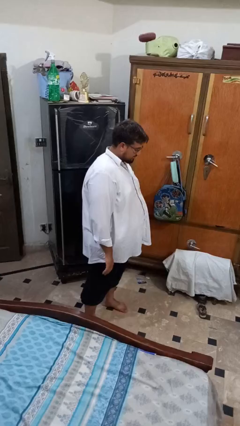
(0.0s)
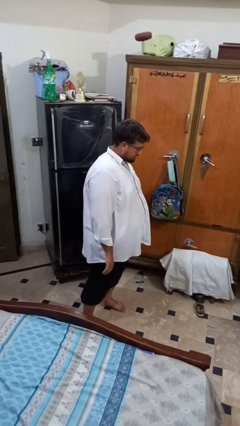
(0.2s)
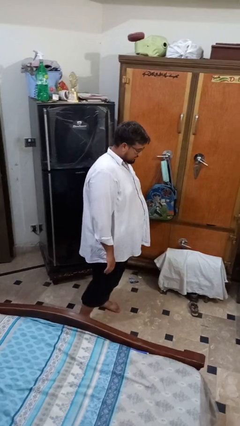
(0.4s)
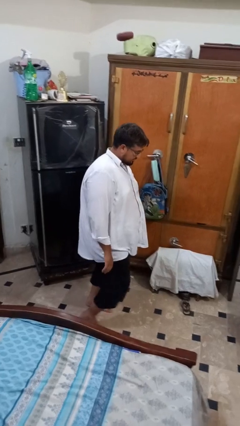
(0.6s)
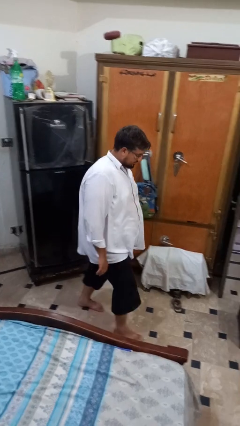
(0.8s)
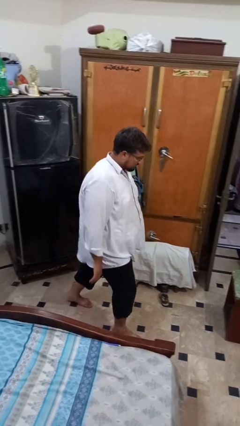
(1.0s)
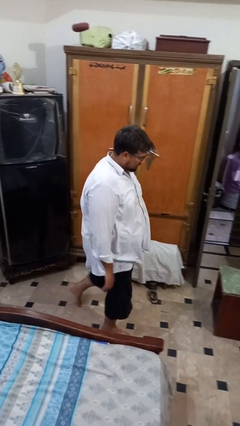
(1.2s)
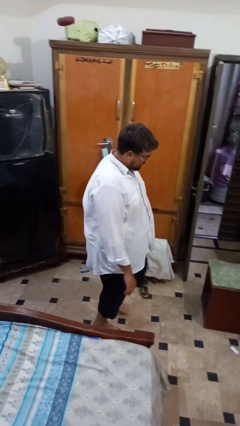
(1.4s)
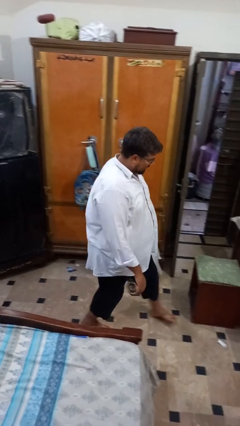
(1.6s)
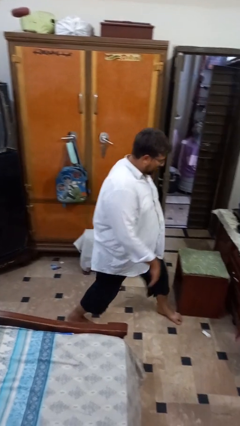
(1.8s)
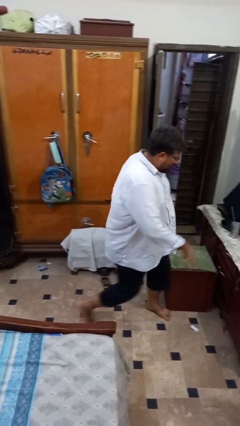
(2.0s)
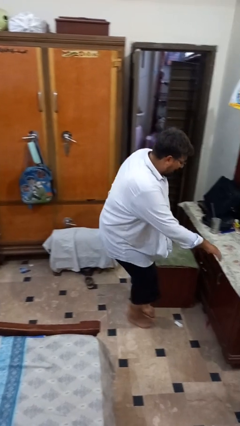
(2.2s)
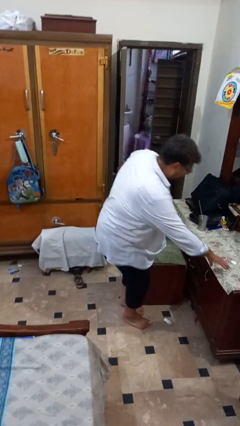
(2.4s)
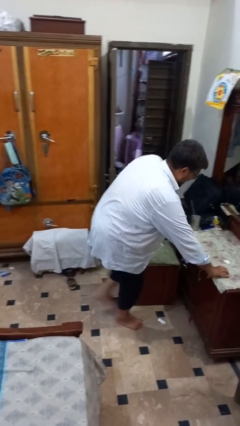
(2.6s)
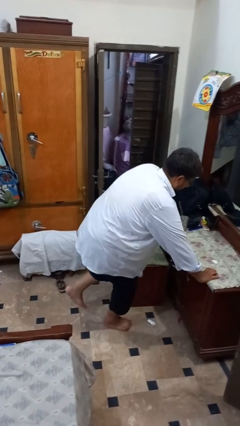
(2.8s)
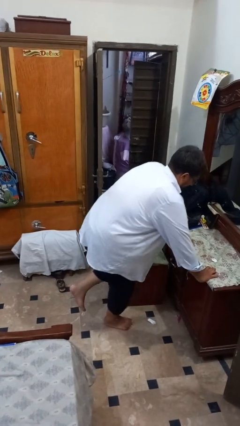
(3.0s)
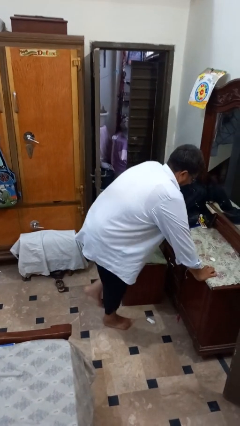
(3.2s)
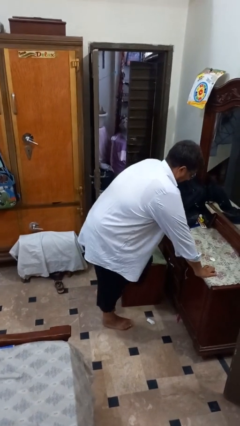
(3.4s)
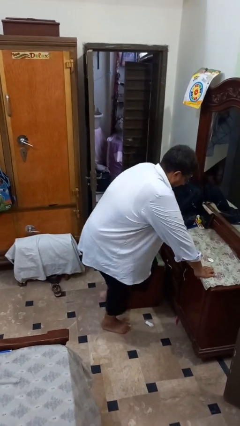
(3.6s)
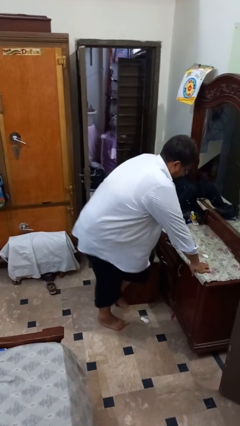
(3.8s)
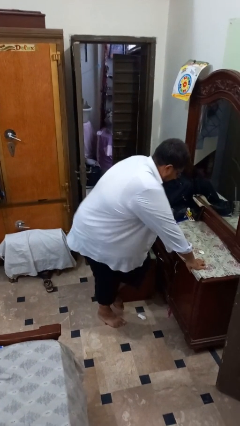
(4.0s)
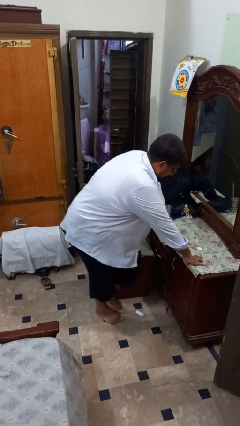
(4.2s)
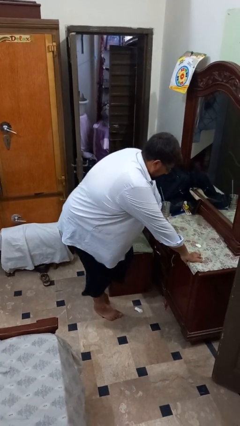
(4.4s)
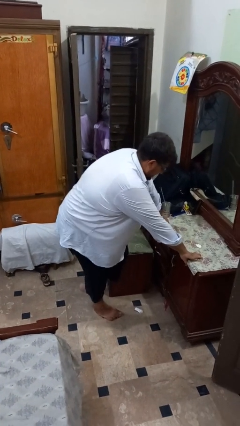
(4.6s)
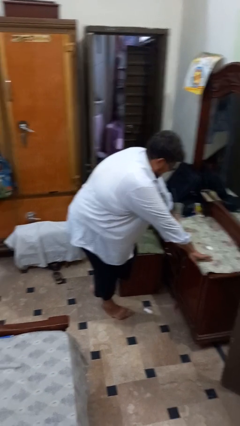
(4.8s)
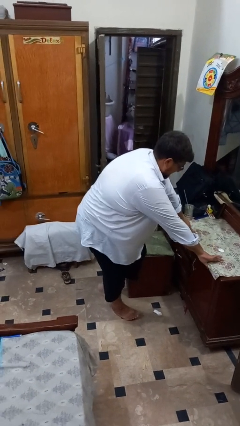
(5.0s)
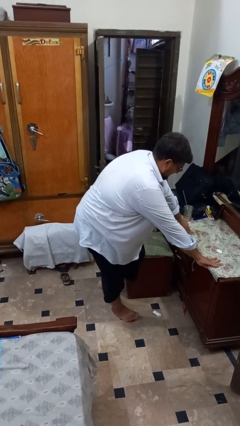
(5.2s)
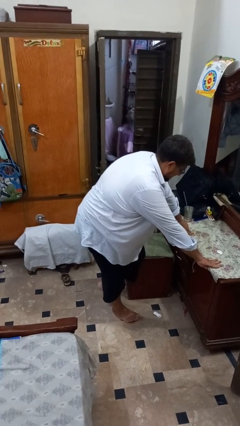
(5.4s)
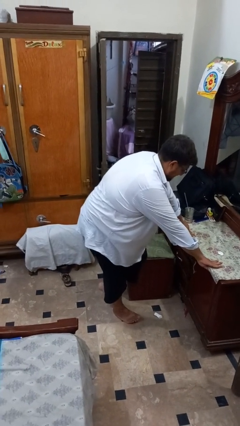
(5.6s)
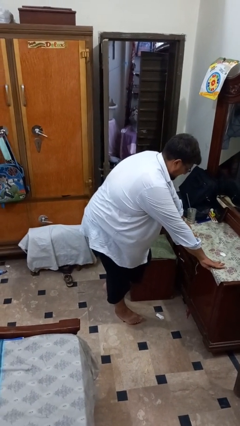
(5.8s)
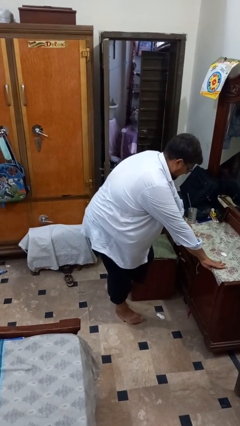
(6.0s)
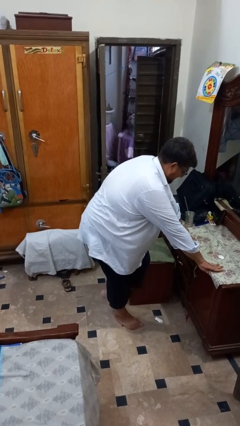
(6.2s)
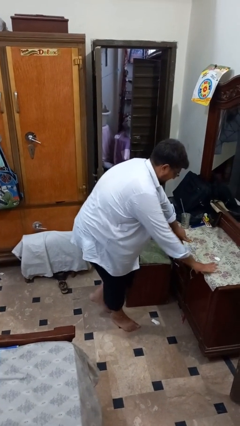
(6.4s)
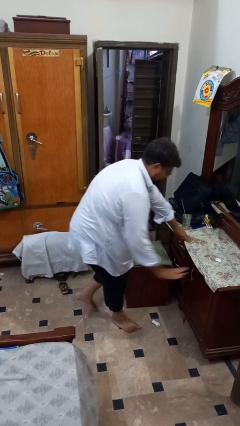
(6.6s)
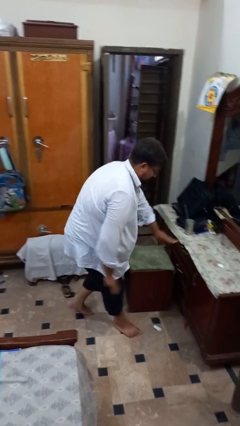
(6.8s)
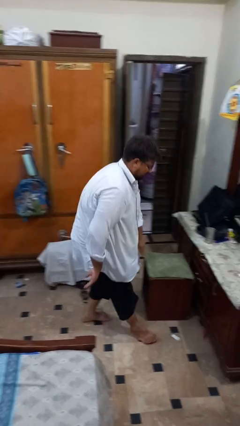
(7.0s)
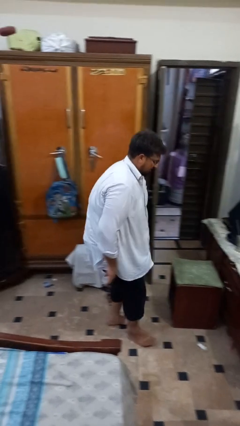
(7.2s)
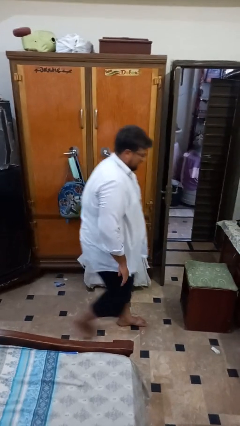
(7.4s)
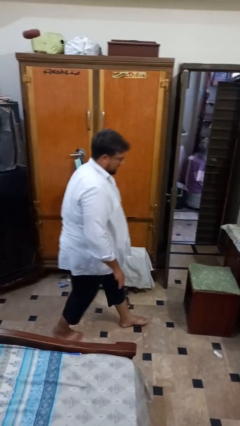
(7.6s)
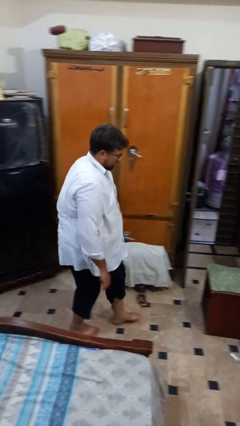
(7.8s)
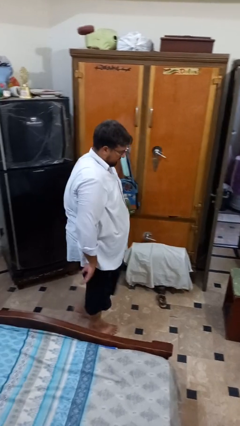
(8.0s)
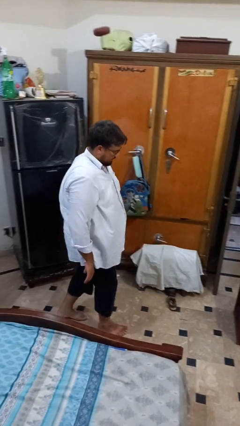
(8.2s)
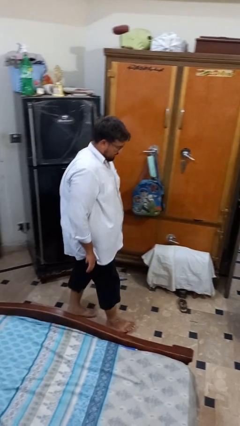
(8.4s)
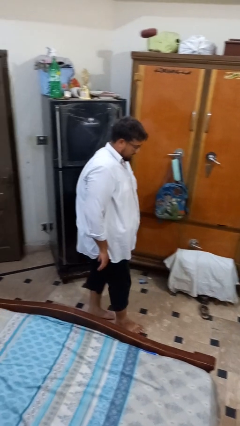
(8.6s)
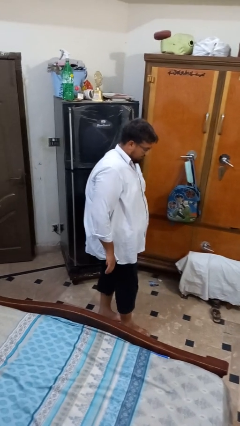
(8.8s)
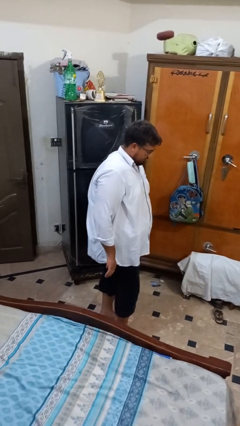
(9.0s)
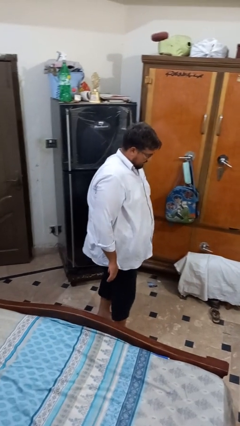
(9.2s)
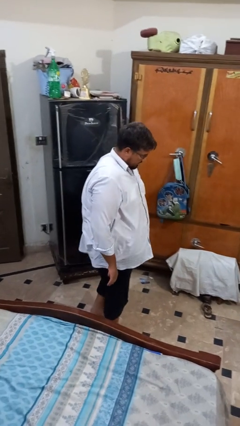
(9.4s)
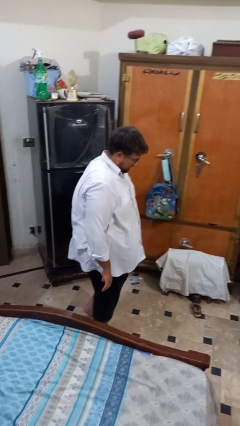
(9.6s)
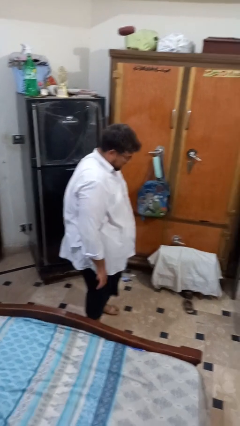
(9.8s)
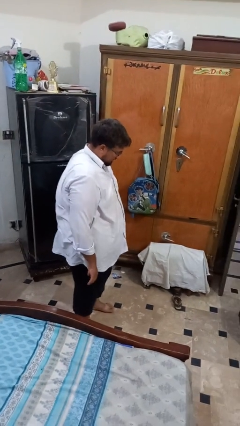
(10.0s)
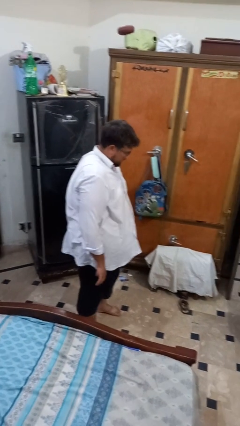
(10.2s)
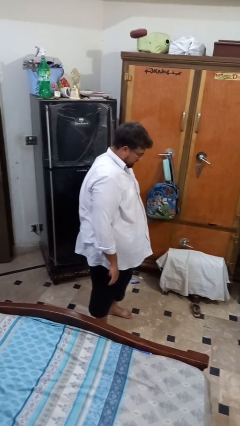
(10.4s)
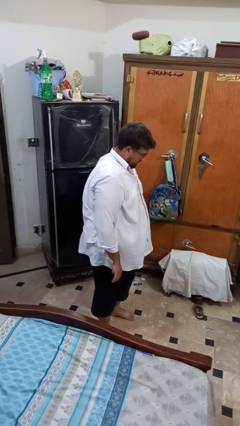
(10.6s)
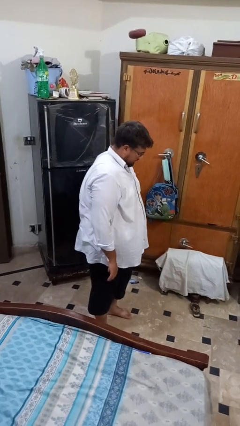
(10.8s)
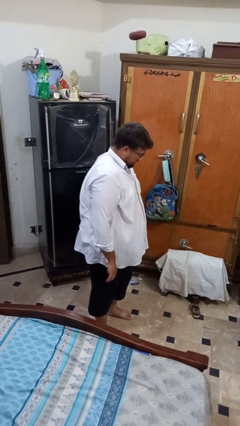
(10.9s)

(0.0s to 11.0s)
person bumps into table

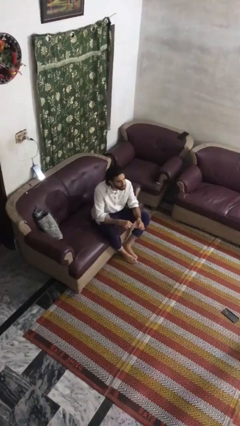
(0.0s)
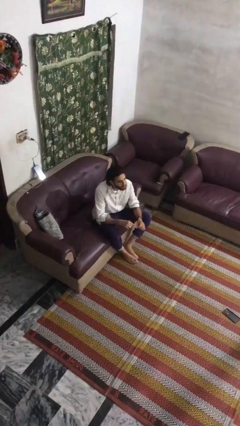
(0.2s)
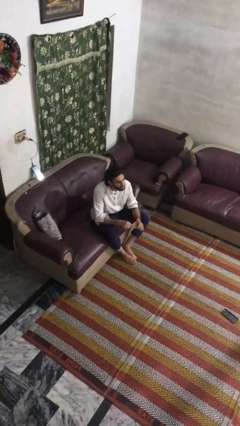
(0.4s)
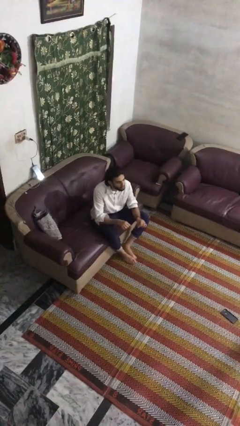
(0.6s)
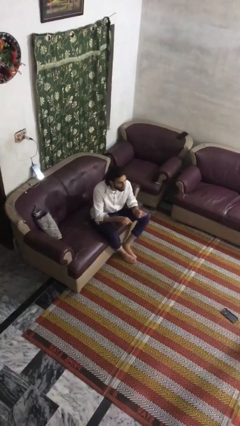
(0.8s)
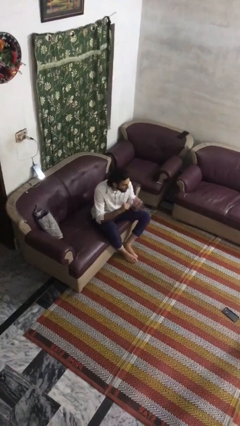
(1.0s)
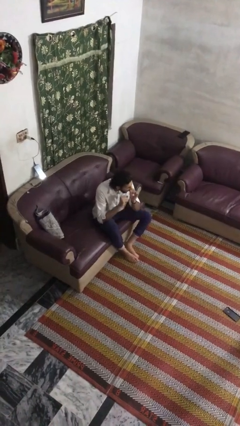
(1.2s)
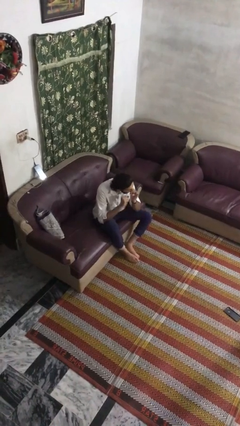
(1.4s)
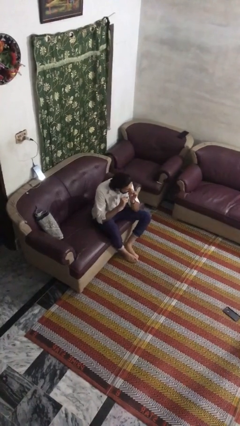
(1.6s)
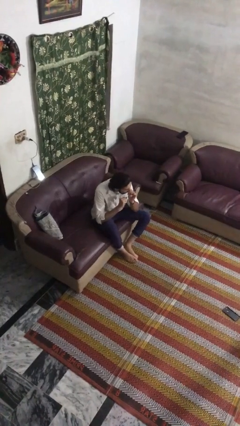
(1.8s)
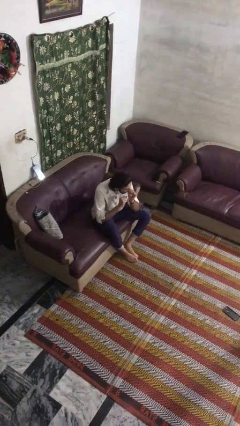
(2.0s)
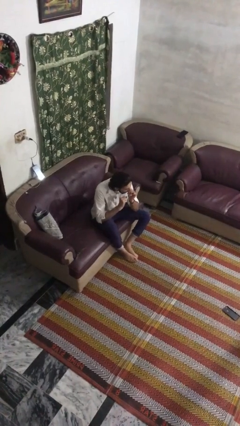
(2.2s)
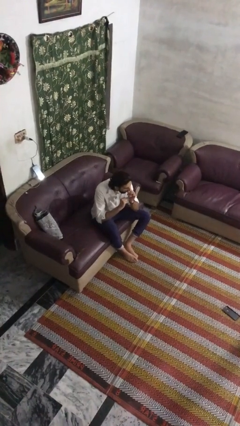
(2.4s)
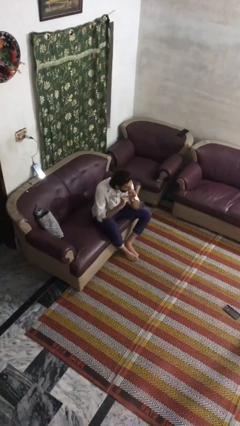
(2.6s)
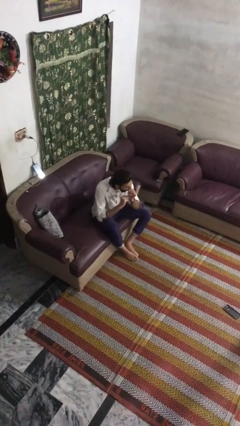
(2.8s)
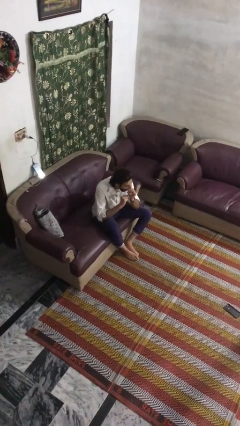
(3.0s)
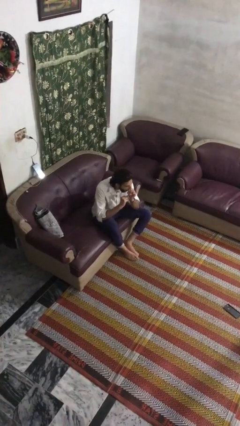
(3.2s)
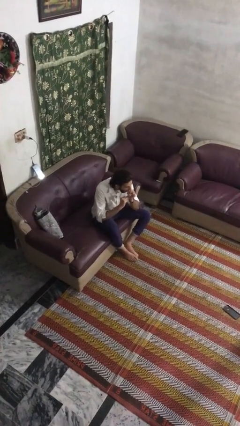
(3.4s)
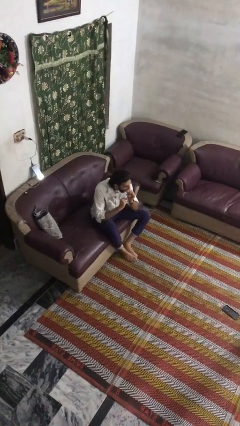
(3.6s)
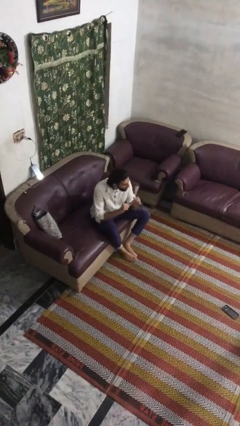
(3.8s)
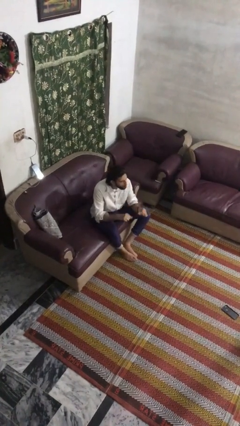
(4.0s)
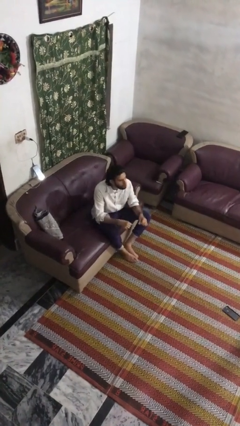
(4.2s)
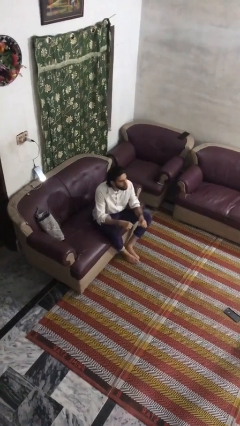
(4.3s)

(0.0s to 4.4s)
person flosses

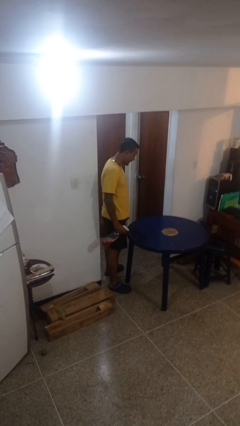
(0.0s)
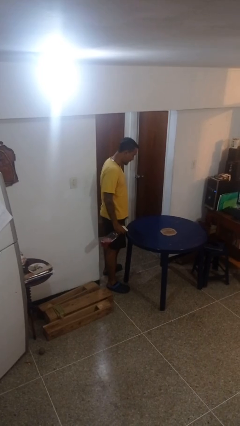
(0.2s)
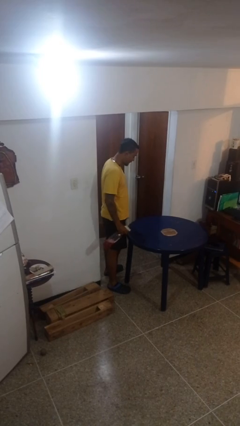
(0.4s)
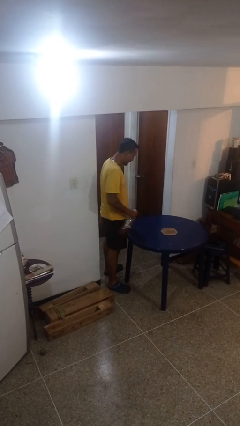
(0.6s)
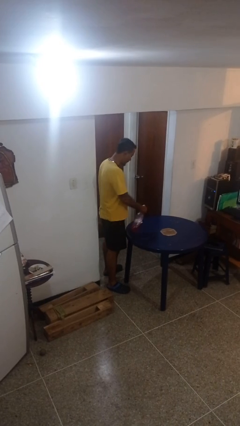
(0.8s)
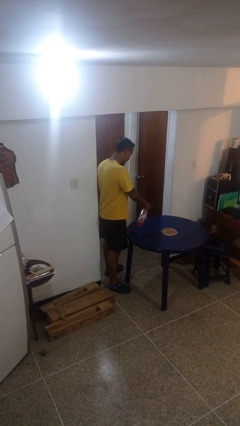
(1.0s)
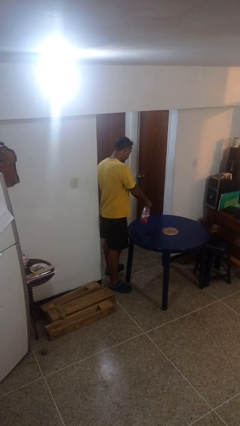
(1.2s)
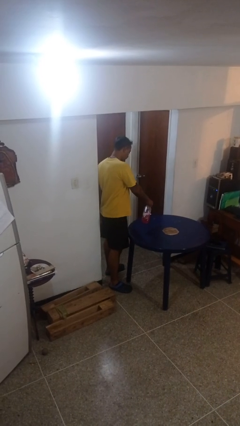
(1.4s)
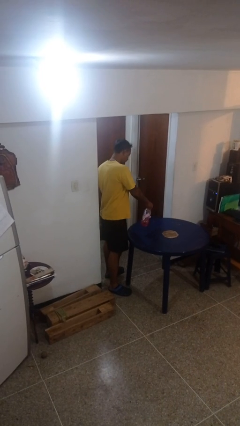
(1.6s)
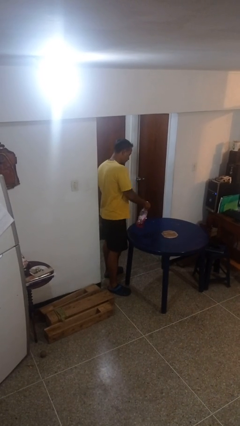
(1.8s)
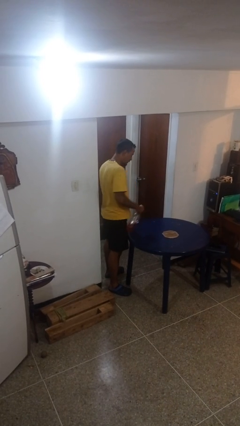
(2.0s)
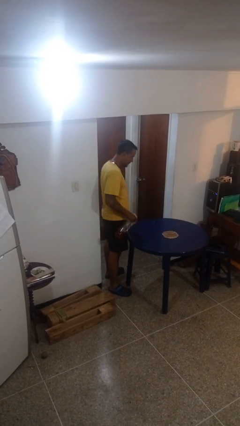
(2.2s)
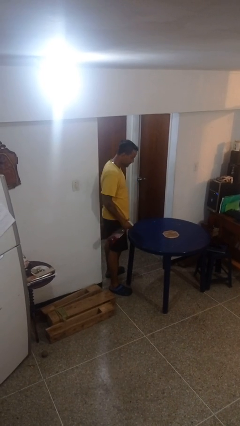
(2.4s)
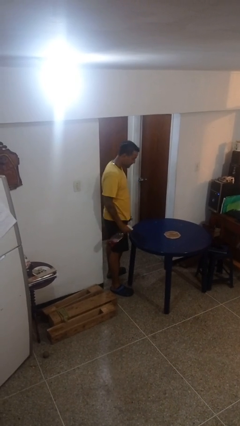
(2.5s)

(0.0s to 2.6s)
person sprays from bottle
